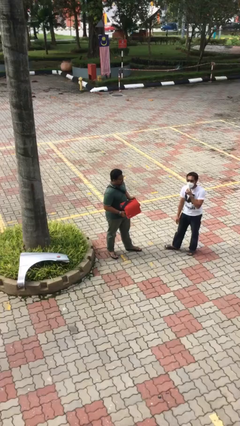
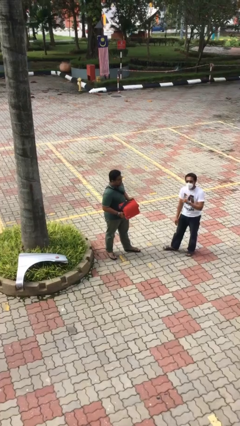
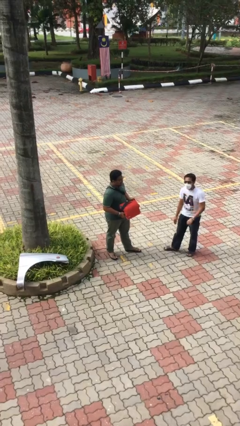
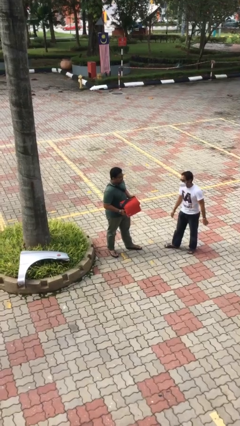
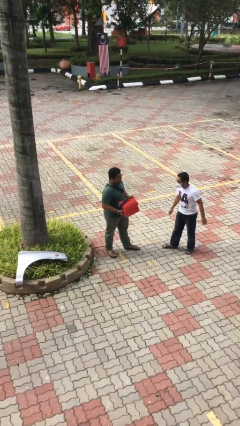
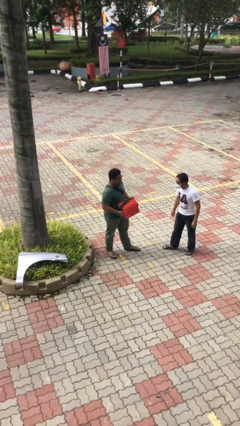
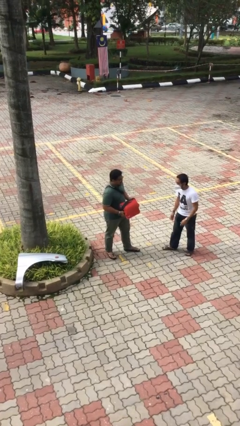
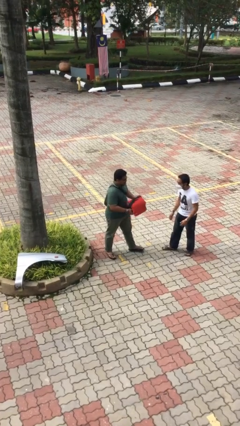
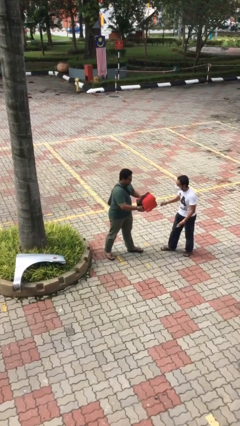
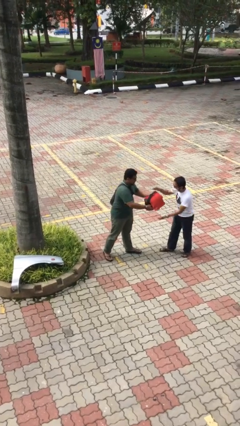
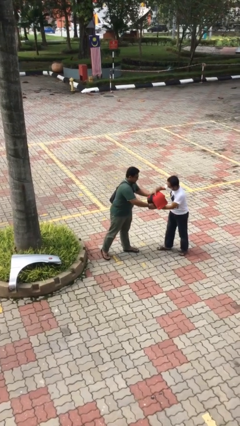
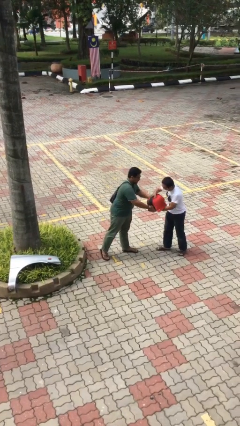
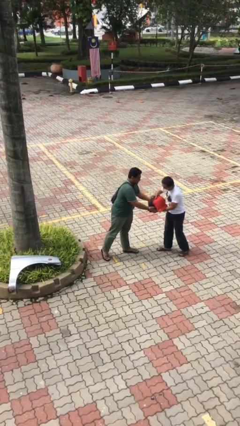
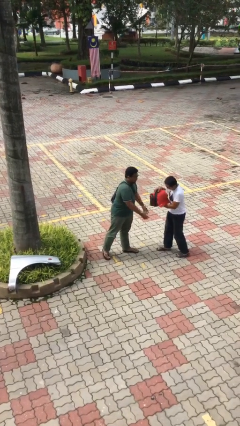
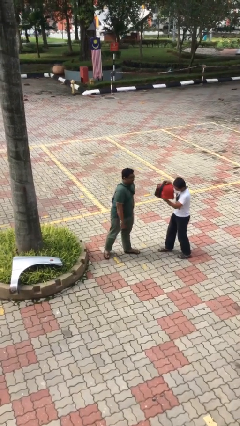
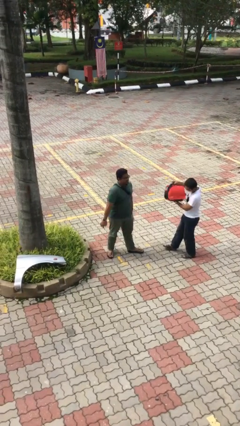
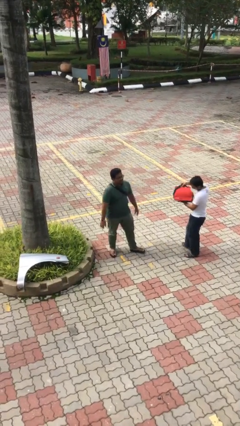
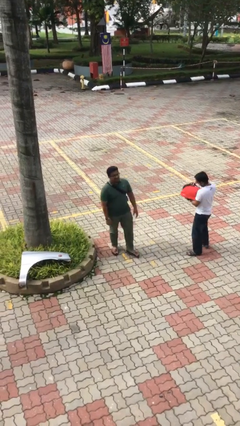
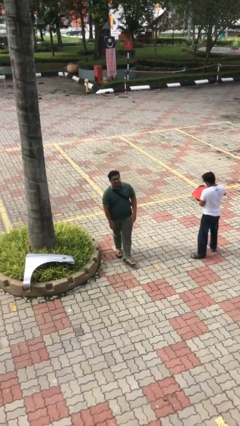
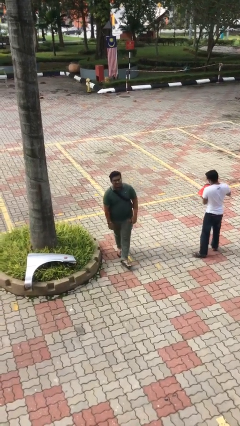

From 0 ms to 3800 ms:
person transfers object to person

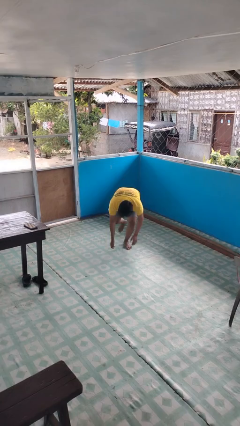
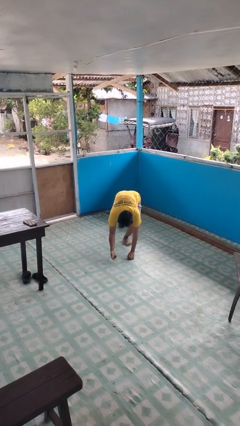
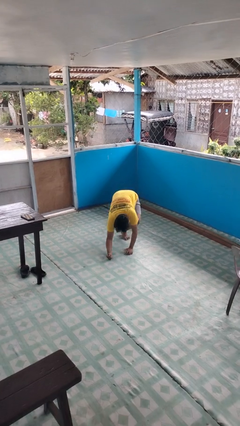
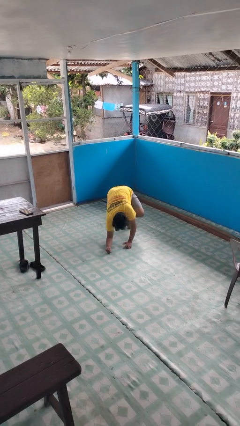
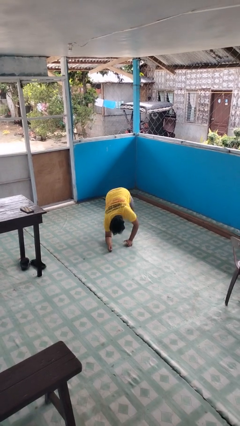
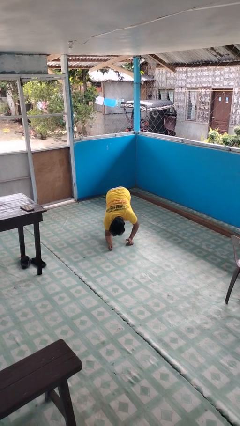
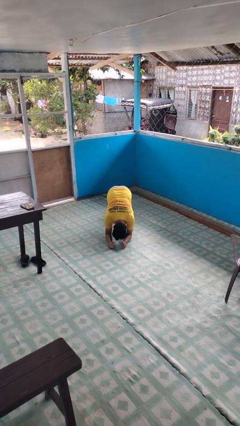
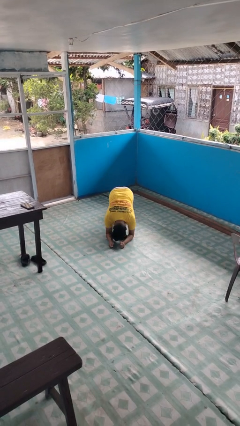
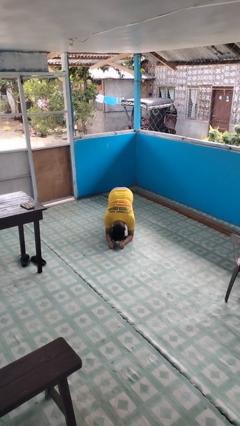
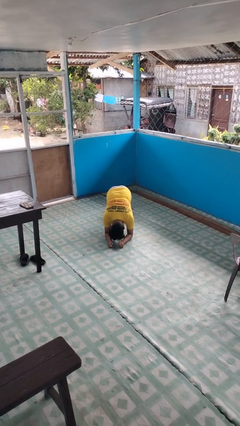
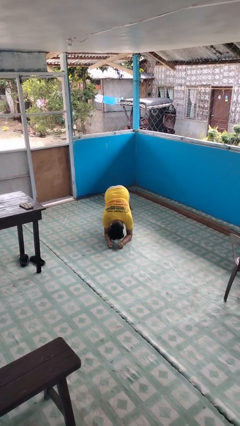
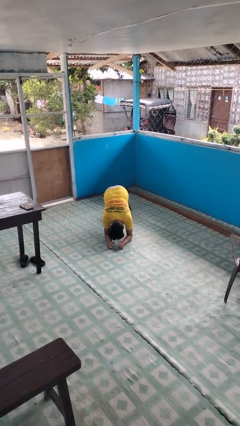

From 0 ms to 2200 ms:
person exercises with plank

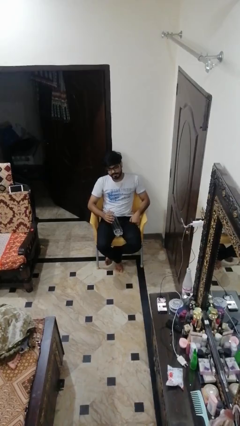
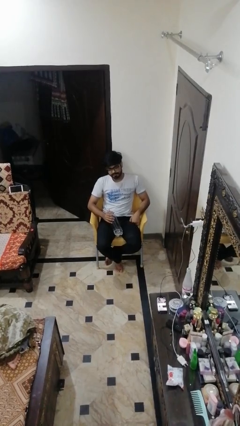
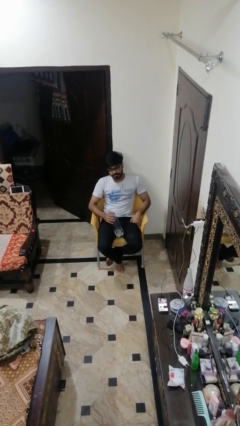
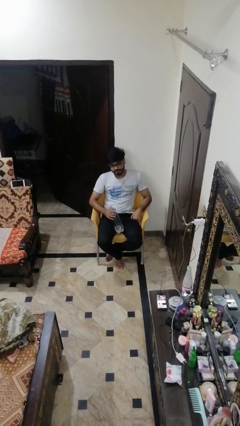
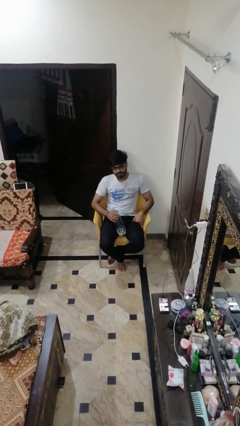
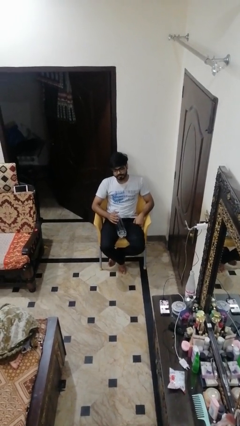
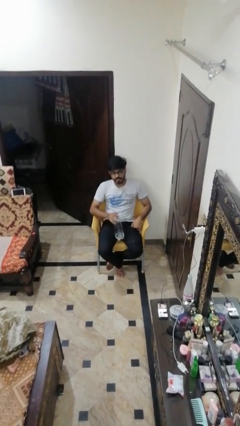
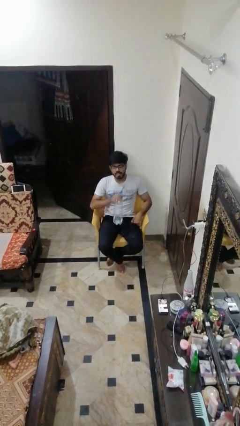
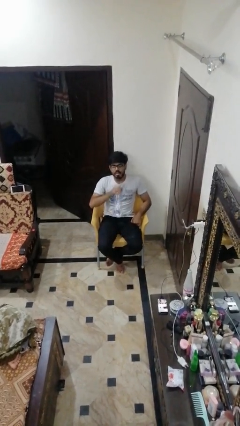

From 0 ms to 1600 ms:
person drops object

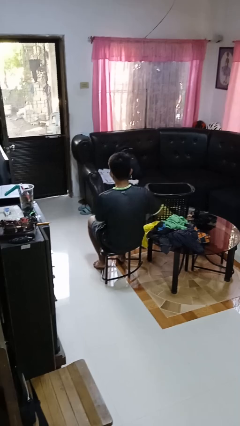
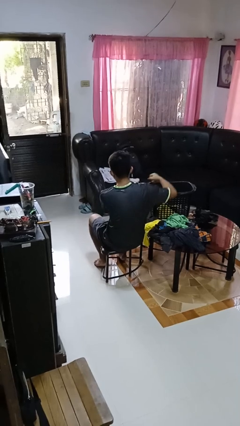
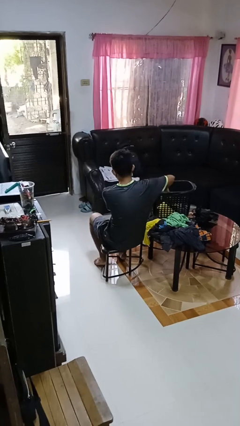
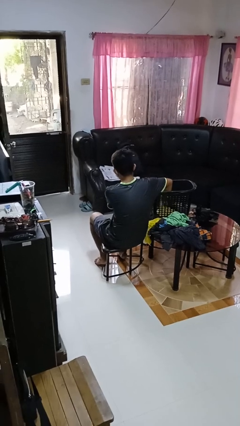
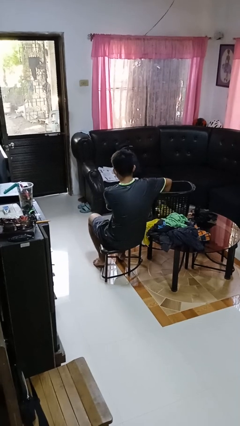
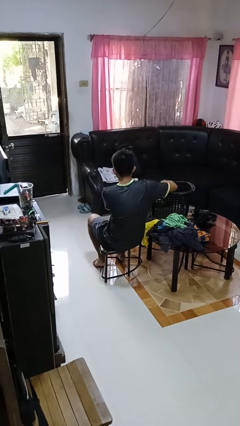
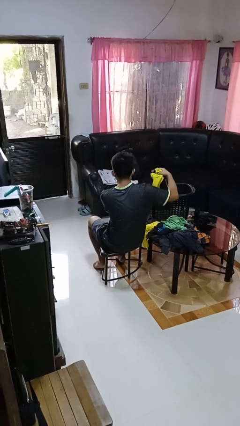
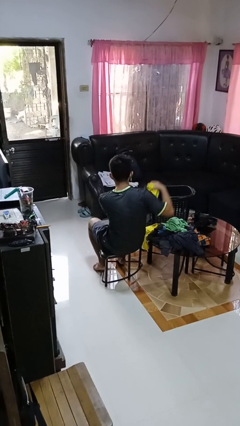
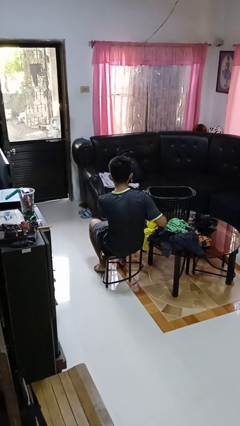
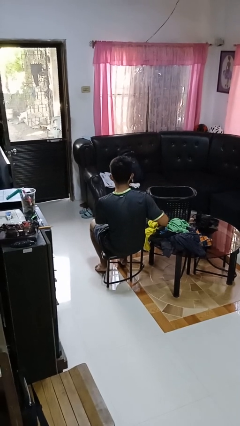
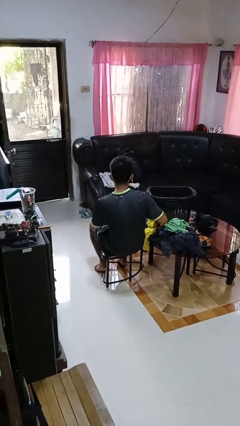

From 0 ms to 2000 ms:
person takes object from basket

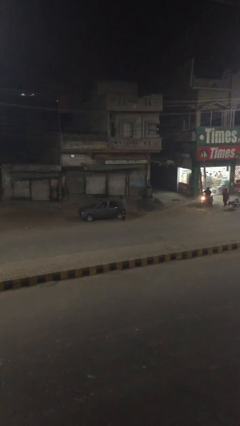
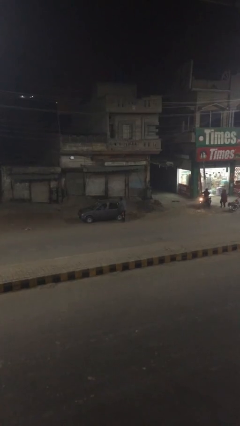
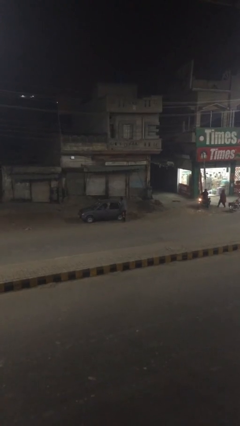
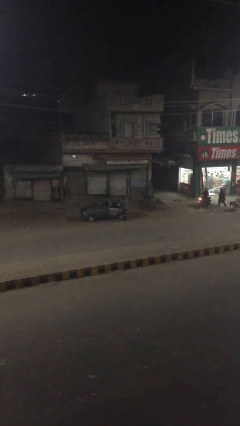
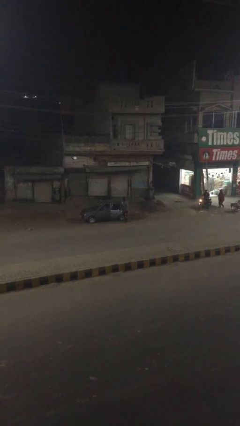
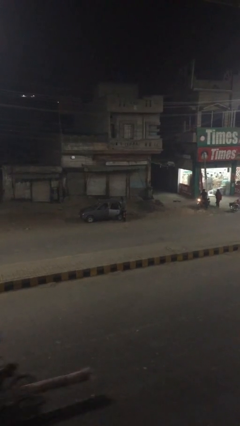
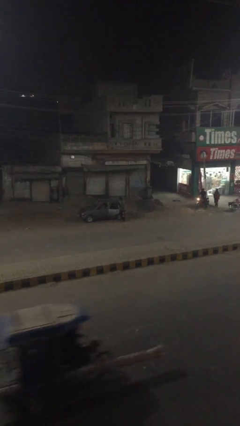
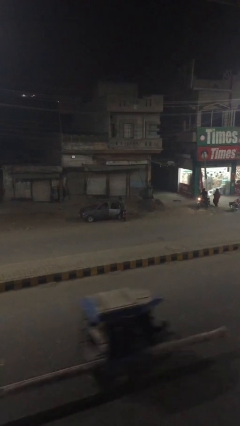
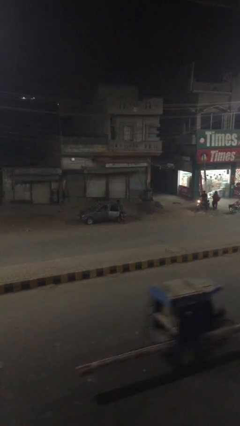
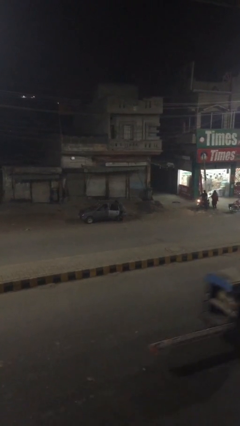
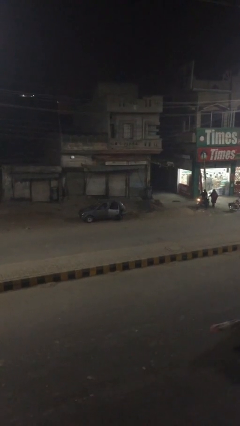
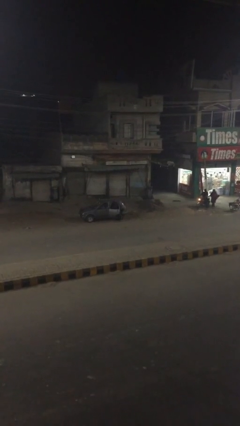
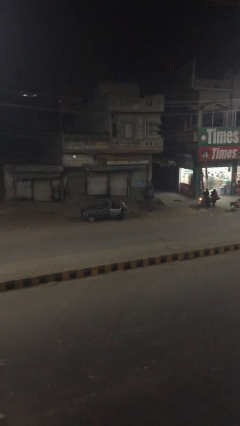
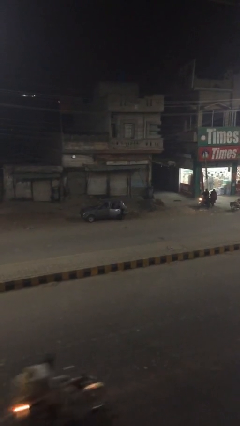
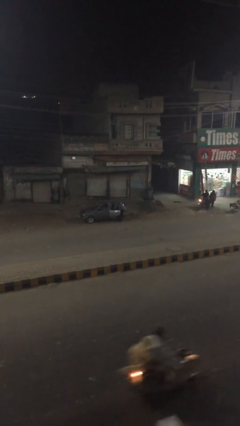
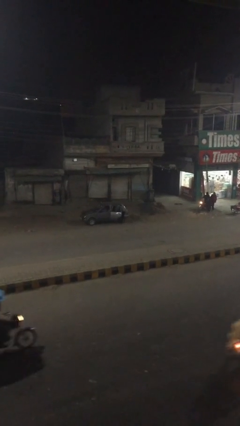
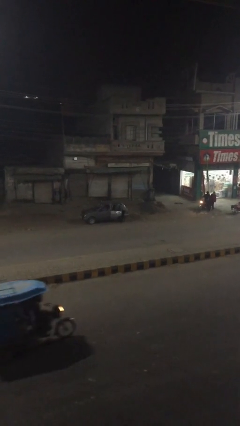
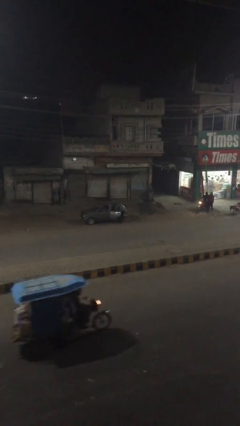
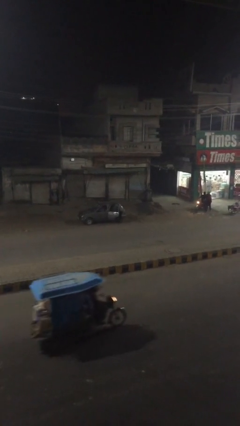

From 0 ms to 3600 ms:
person opens car door

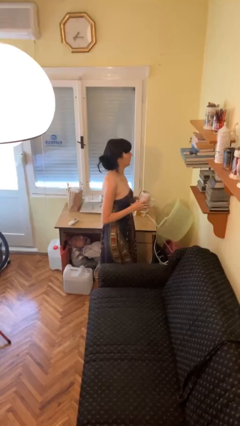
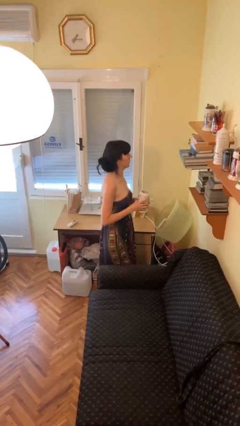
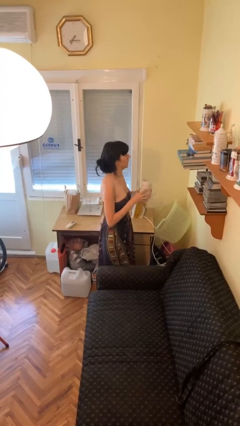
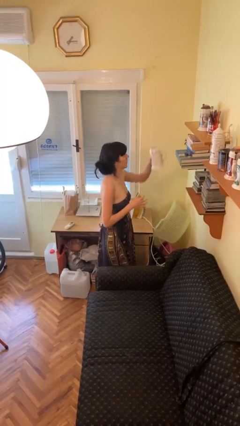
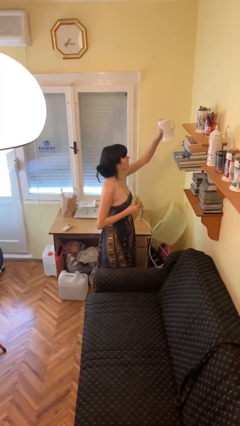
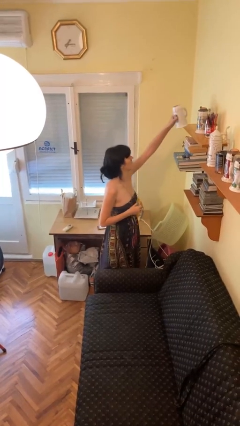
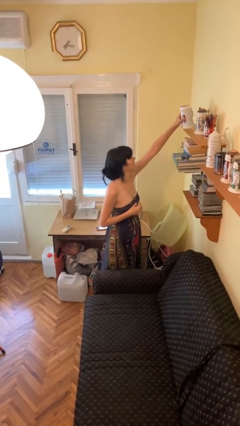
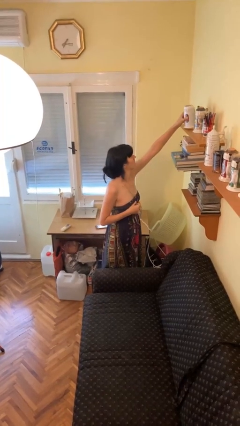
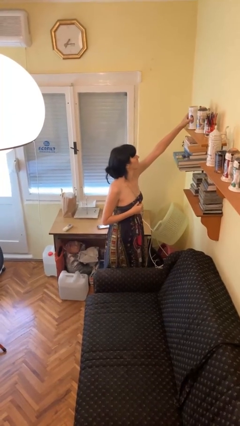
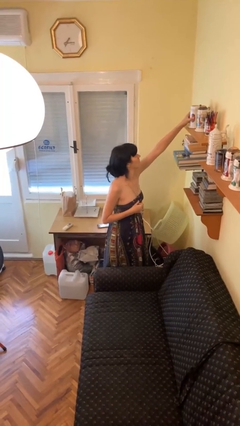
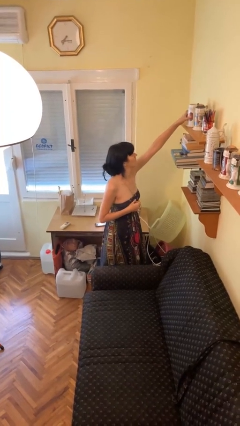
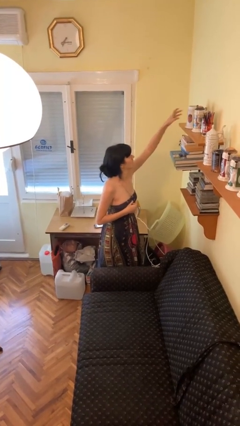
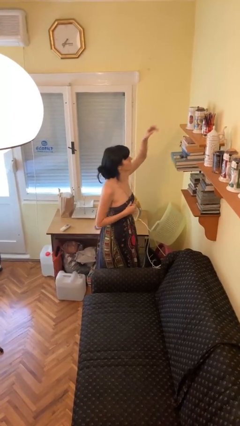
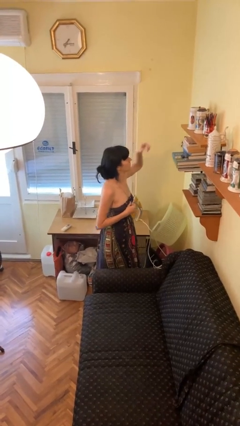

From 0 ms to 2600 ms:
person puts down object on shelf

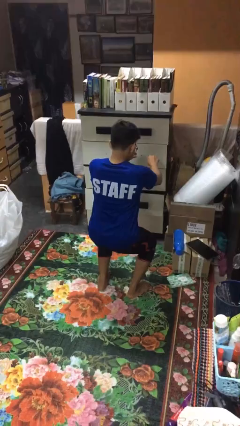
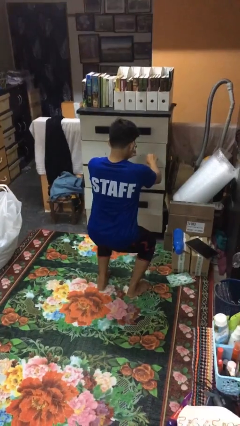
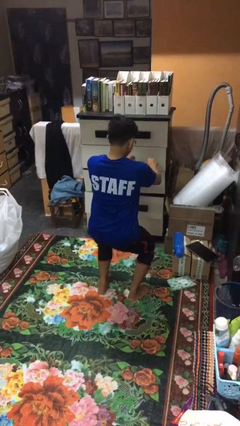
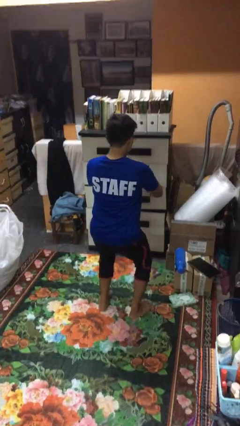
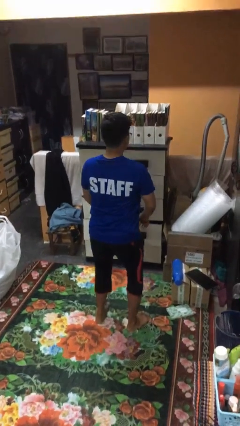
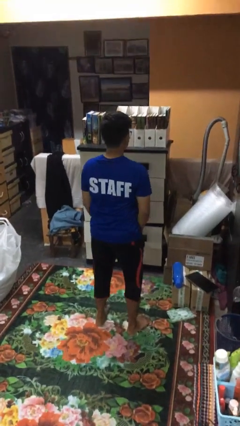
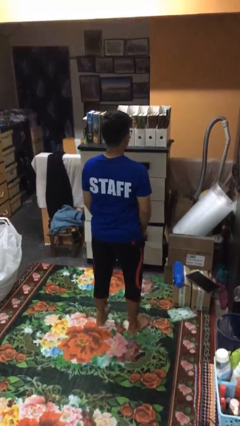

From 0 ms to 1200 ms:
person stands up

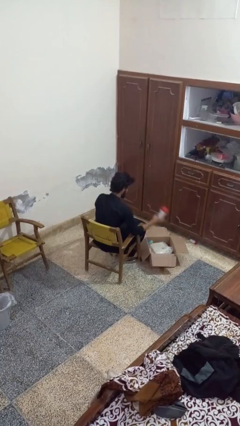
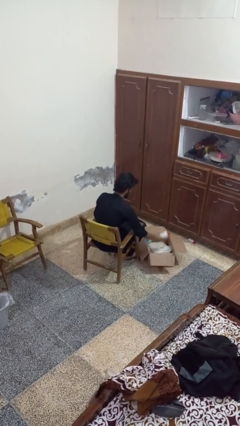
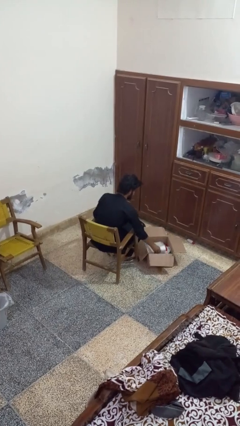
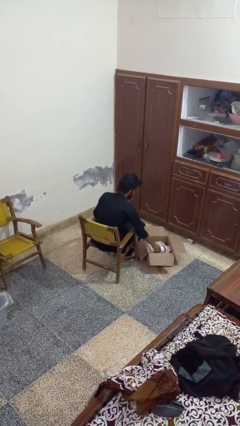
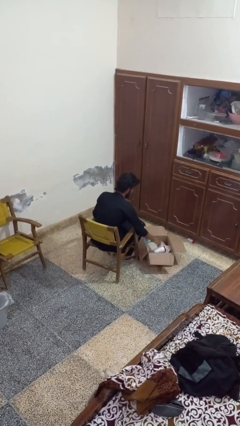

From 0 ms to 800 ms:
person puts object into box
